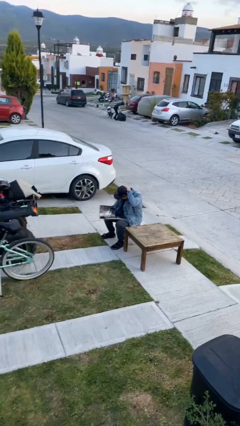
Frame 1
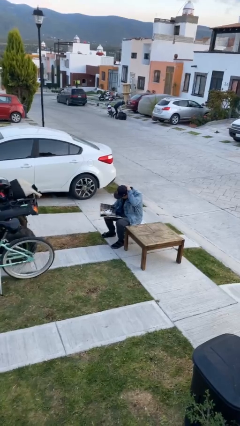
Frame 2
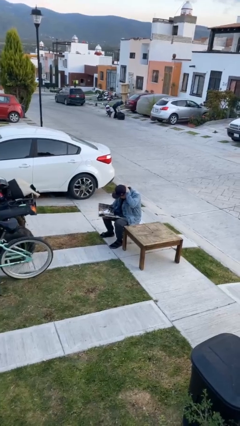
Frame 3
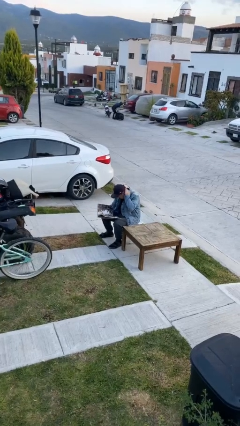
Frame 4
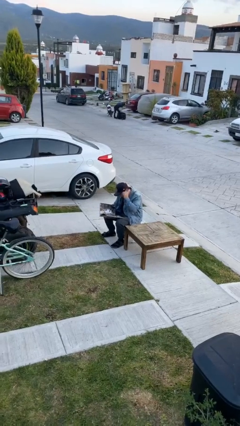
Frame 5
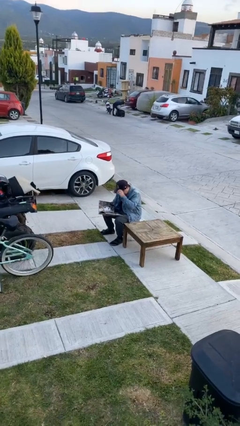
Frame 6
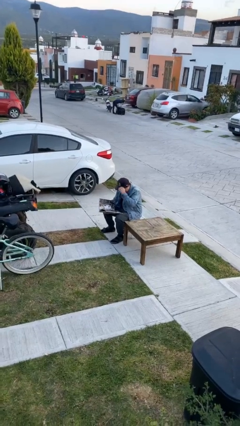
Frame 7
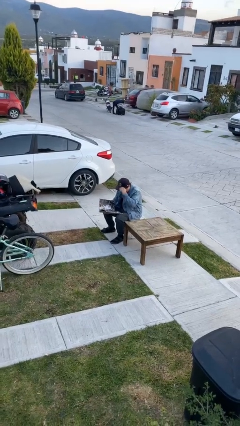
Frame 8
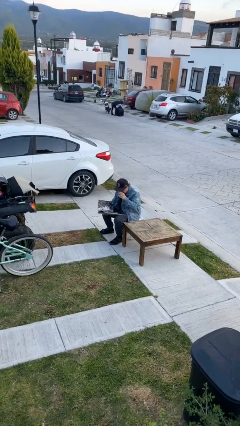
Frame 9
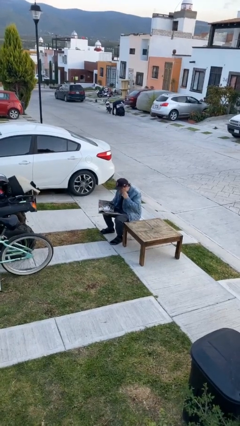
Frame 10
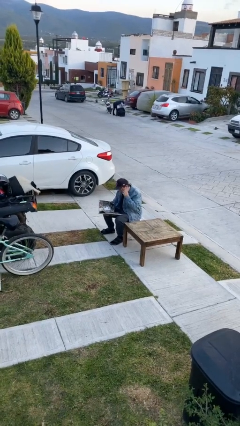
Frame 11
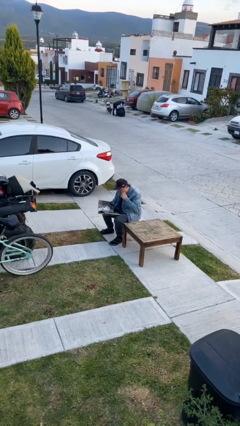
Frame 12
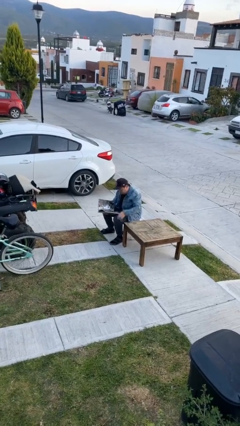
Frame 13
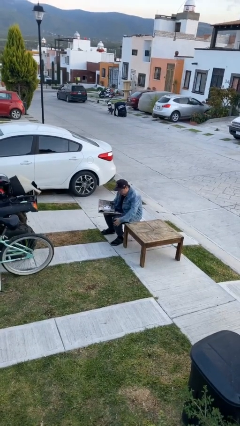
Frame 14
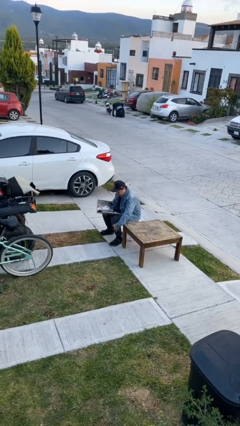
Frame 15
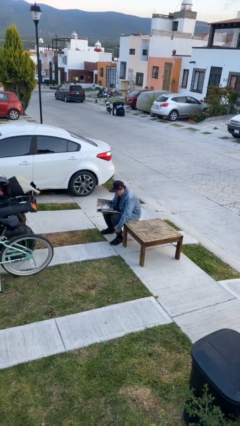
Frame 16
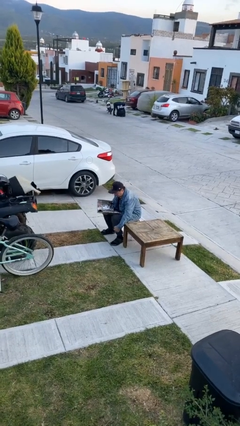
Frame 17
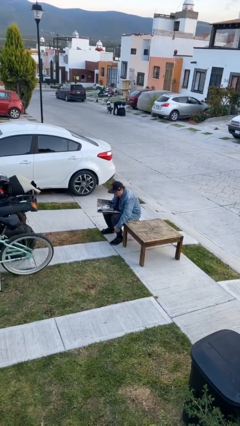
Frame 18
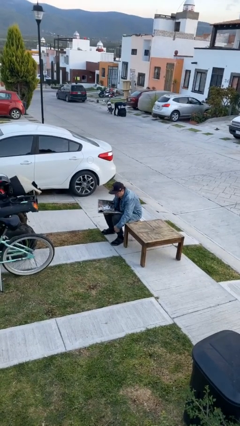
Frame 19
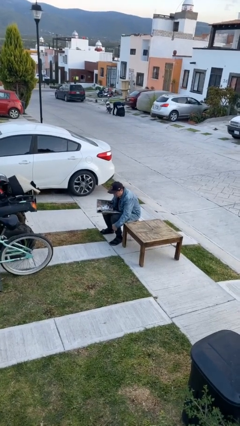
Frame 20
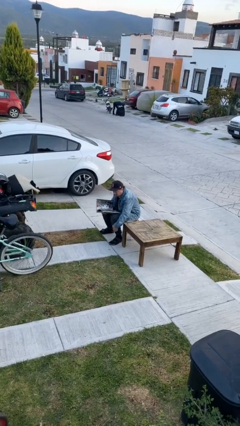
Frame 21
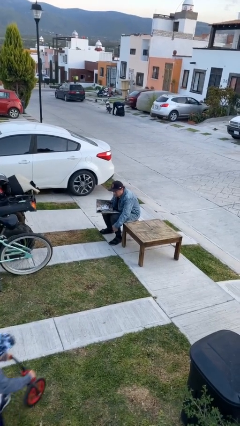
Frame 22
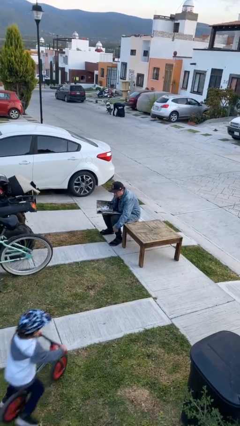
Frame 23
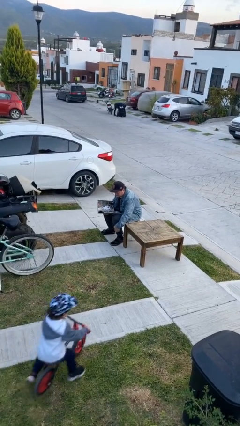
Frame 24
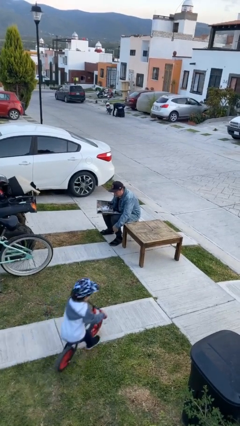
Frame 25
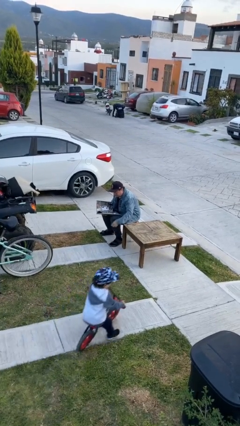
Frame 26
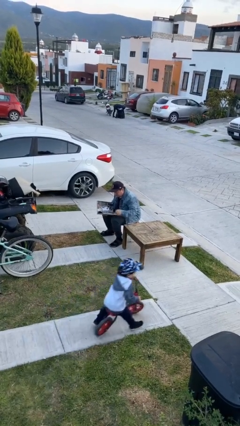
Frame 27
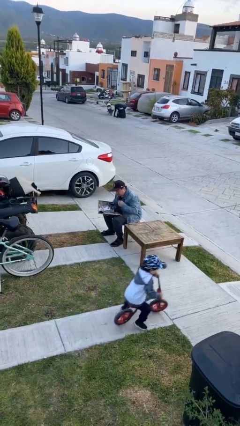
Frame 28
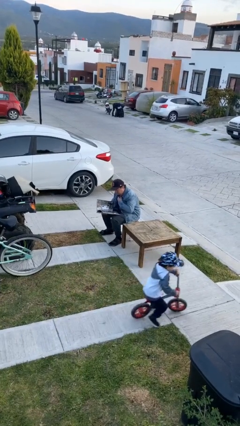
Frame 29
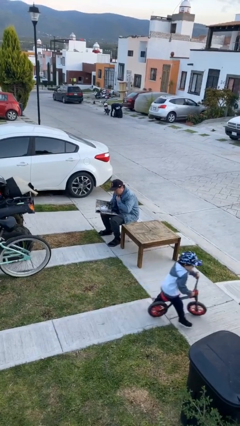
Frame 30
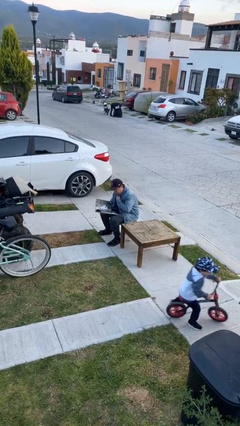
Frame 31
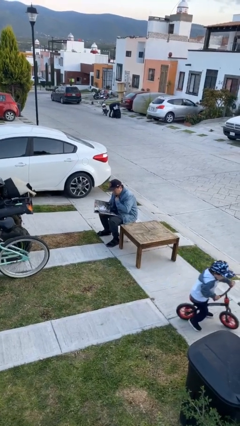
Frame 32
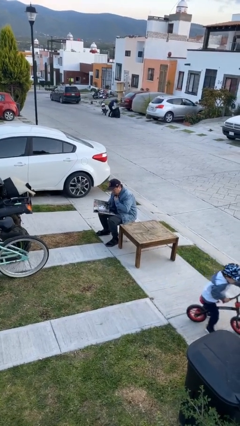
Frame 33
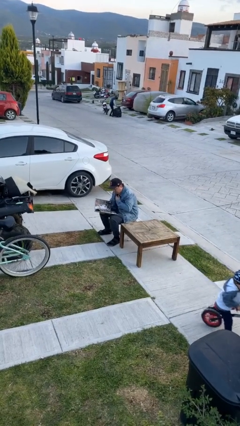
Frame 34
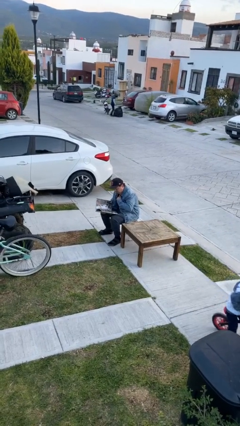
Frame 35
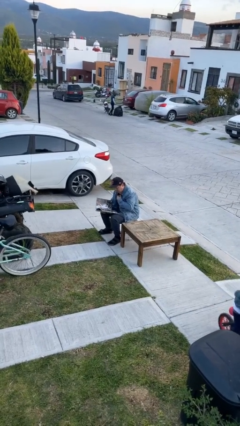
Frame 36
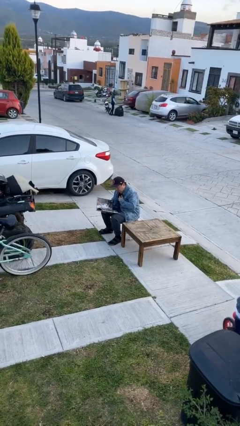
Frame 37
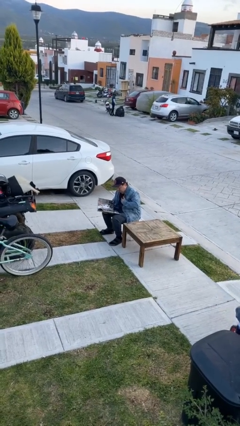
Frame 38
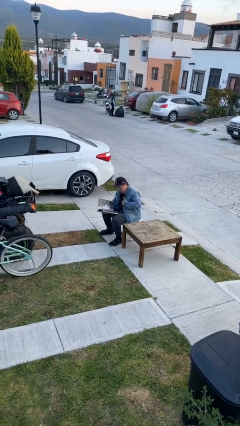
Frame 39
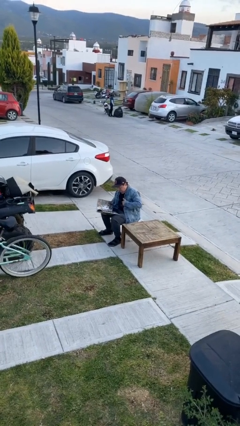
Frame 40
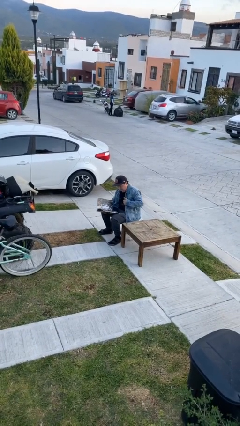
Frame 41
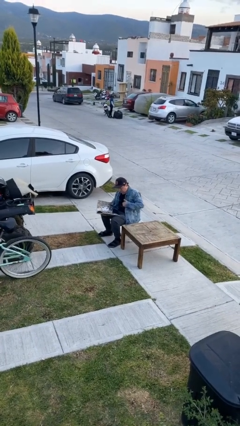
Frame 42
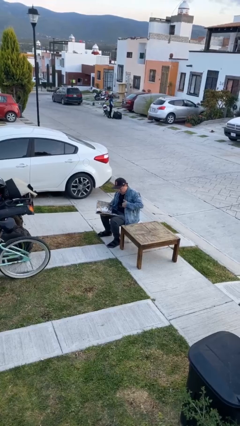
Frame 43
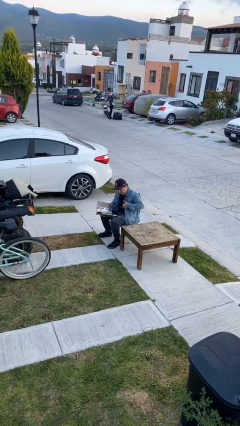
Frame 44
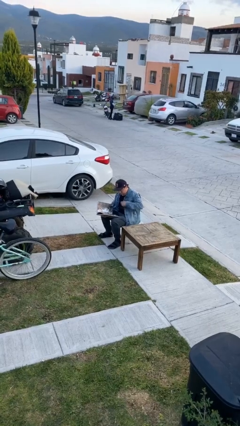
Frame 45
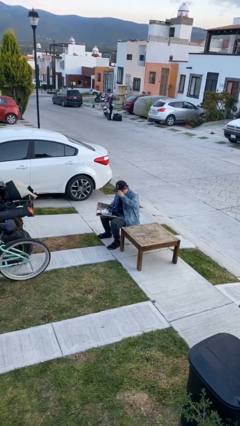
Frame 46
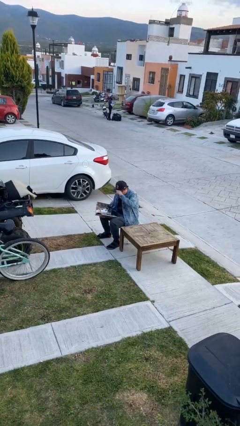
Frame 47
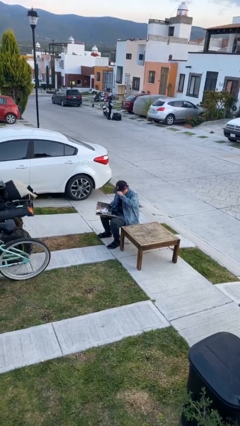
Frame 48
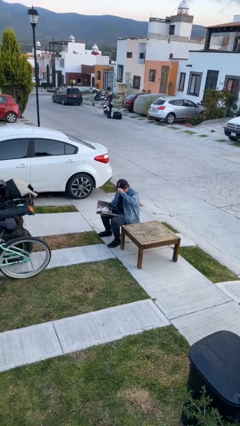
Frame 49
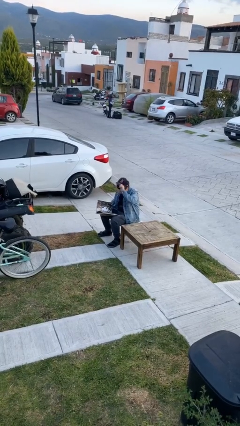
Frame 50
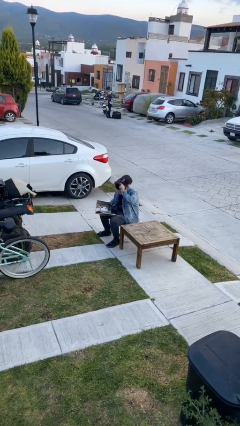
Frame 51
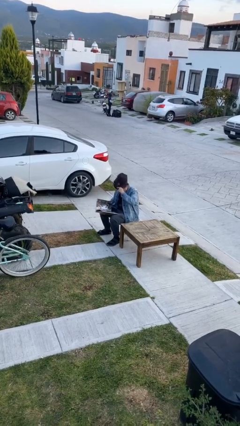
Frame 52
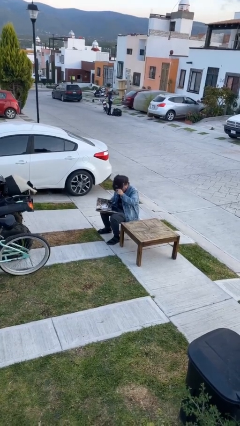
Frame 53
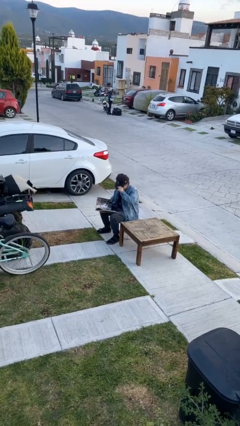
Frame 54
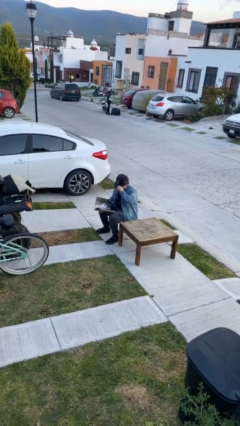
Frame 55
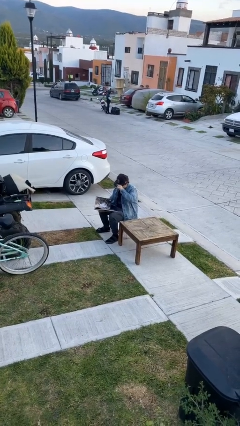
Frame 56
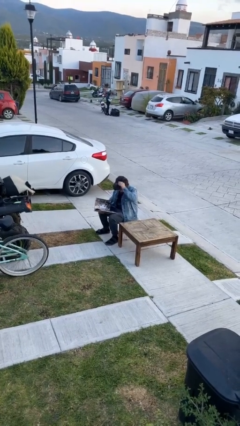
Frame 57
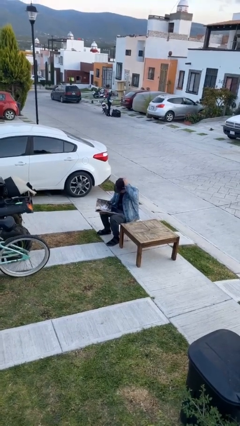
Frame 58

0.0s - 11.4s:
person reads document

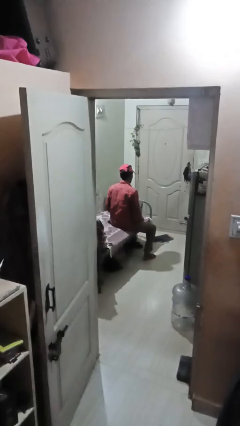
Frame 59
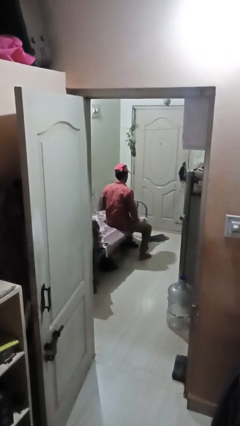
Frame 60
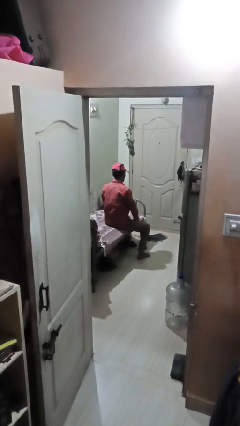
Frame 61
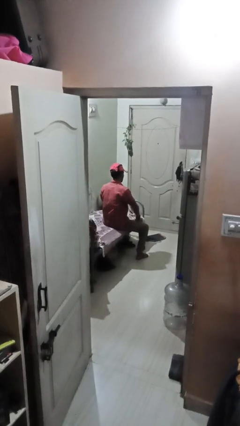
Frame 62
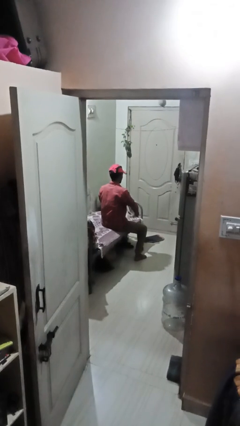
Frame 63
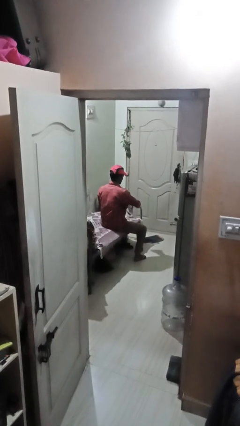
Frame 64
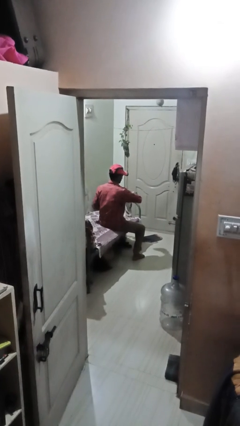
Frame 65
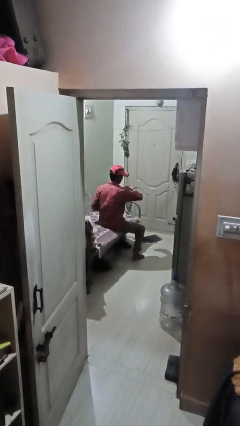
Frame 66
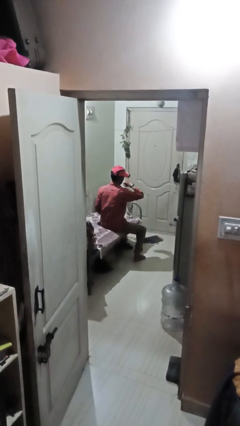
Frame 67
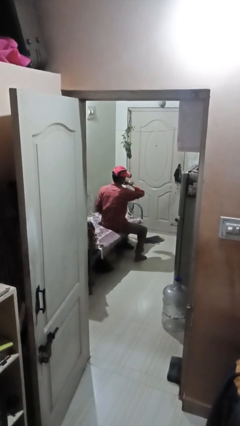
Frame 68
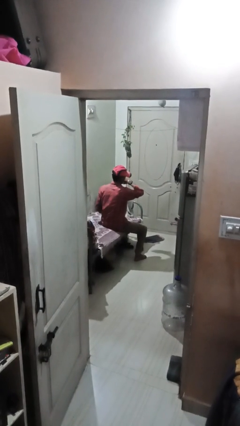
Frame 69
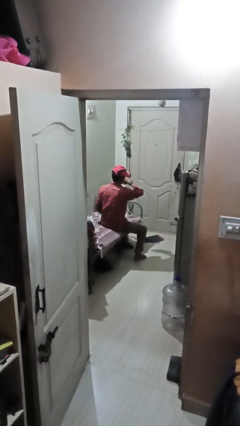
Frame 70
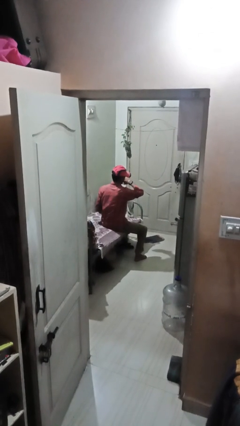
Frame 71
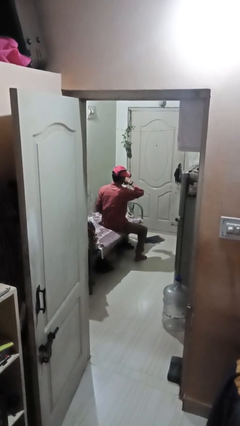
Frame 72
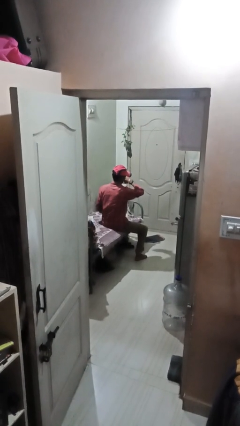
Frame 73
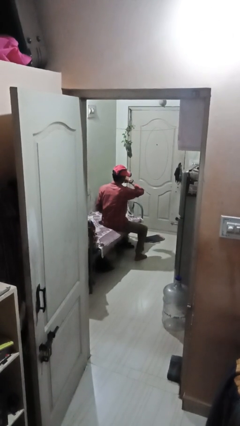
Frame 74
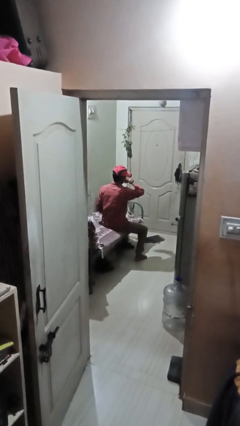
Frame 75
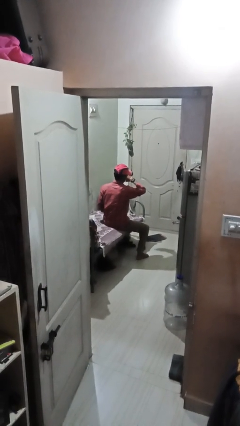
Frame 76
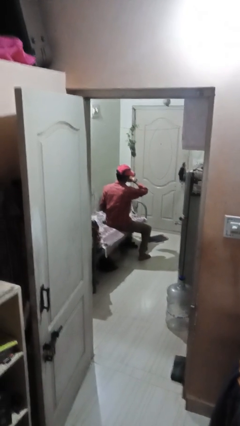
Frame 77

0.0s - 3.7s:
person looks at wristwatch

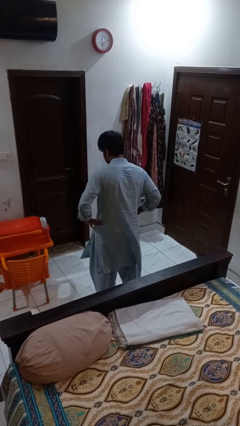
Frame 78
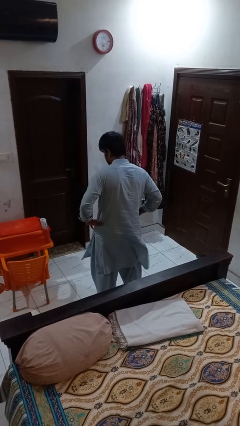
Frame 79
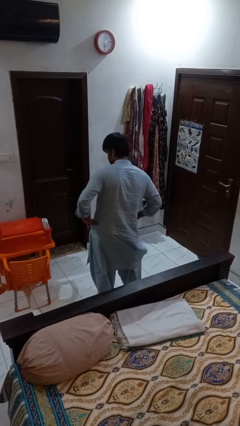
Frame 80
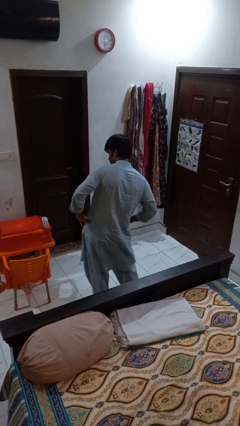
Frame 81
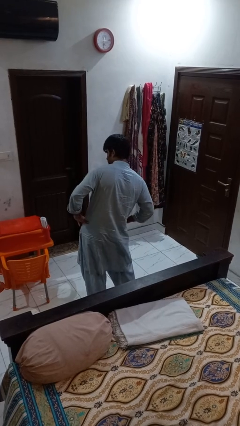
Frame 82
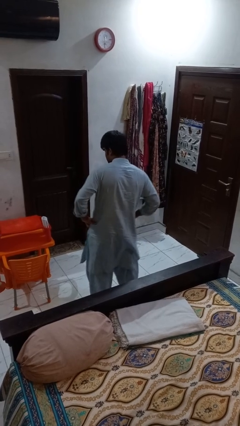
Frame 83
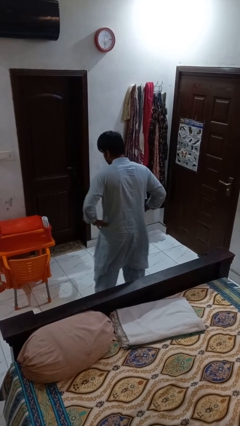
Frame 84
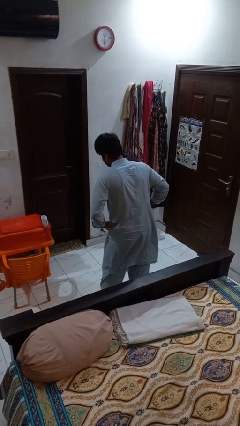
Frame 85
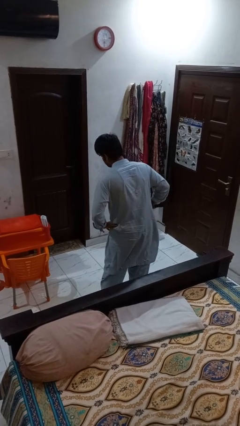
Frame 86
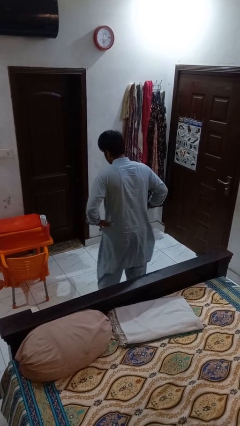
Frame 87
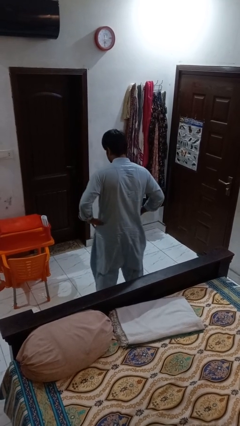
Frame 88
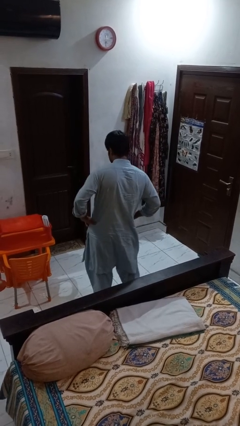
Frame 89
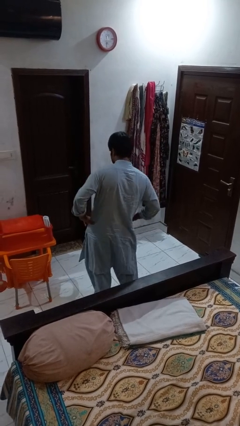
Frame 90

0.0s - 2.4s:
person wiggles hips

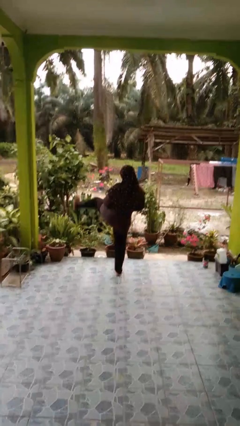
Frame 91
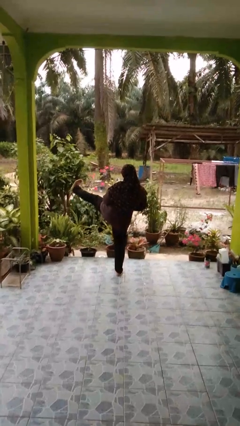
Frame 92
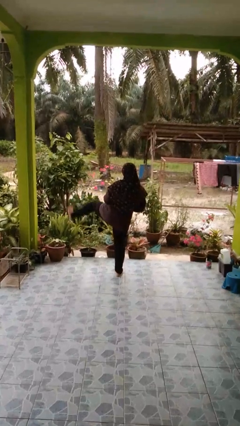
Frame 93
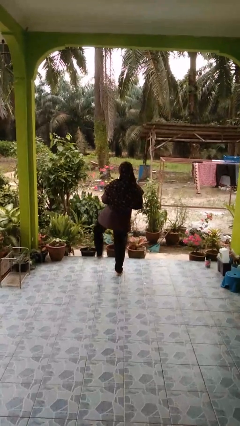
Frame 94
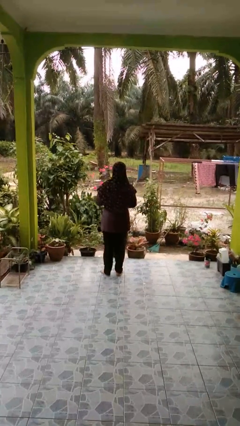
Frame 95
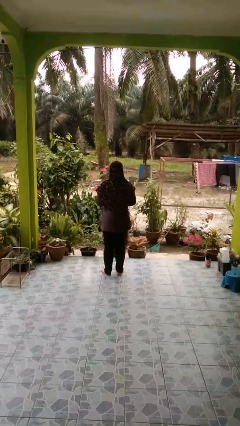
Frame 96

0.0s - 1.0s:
person karate kicks
